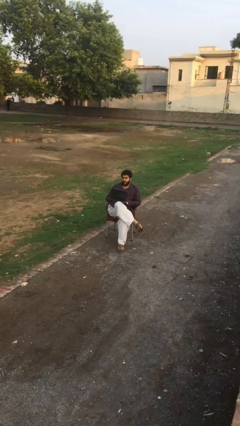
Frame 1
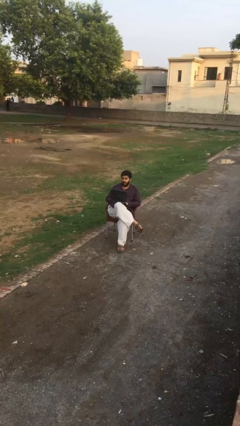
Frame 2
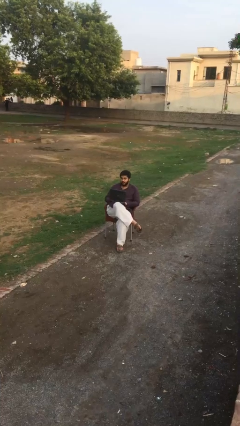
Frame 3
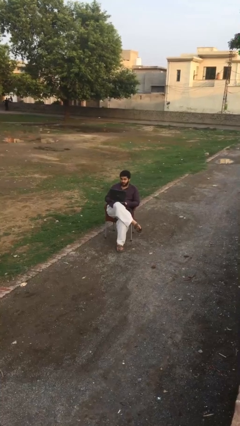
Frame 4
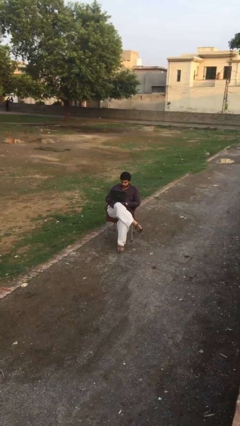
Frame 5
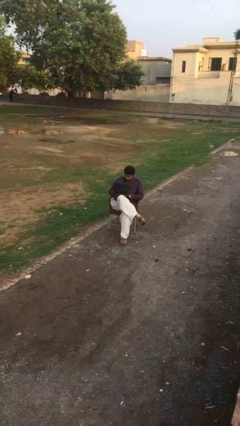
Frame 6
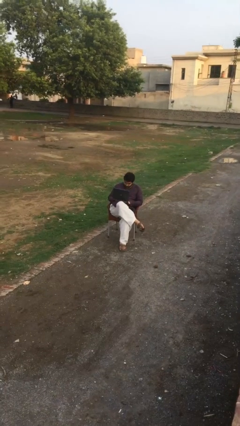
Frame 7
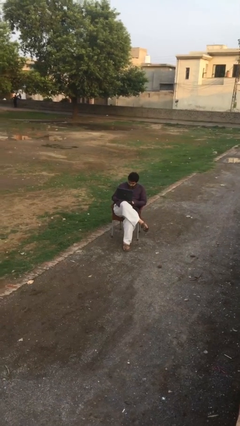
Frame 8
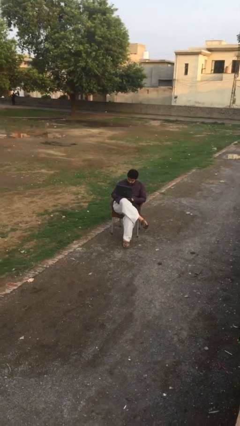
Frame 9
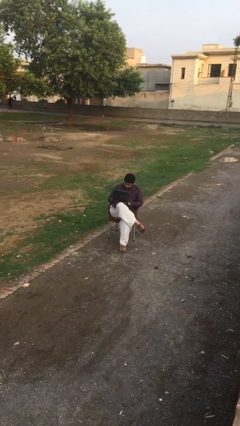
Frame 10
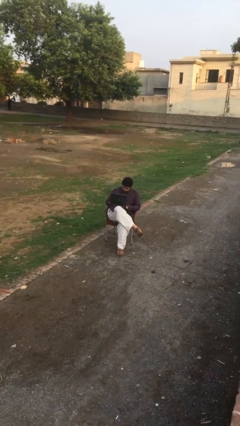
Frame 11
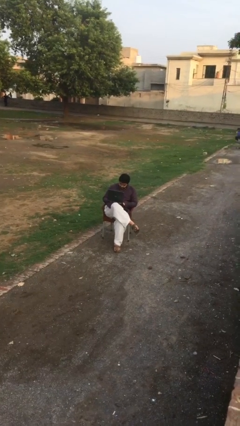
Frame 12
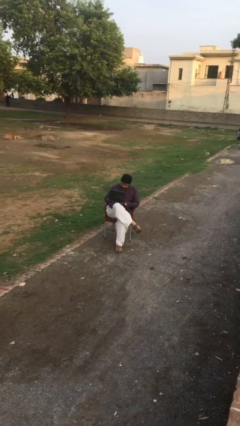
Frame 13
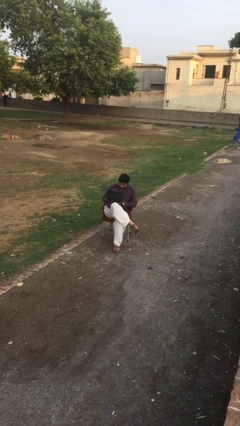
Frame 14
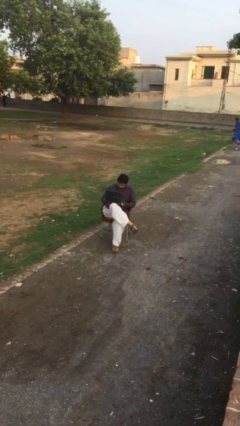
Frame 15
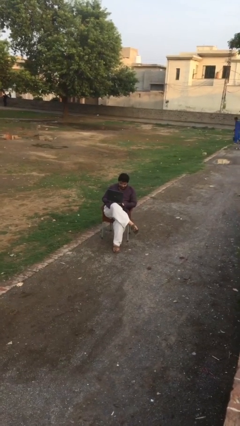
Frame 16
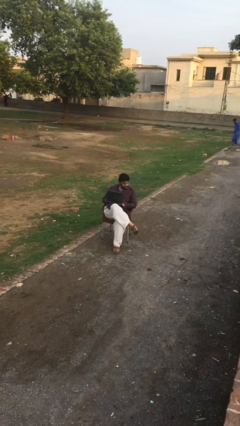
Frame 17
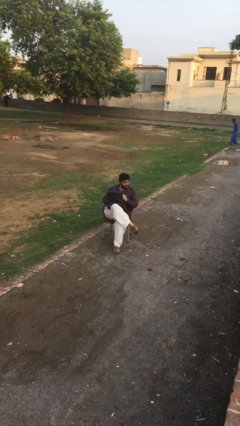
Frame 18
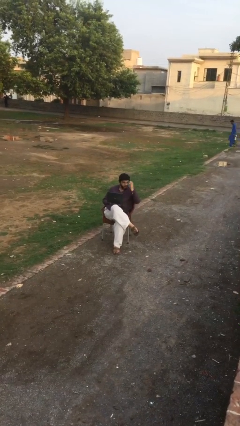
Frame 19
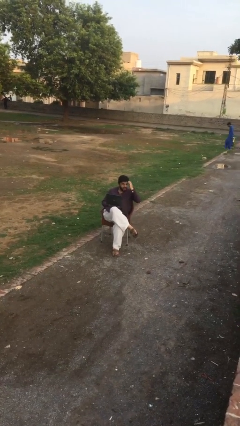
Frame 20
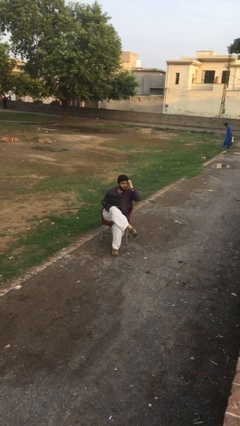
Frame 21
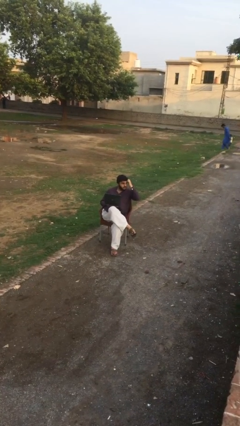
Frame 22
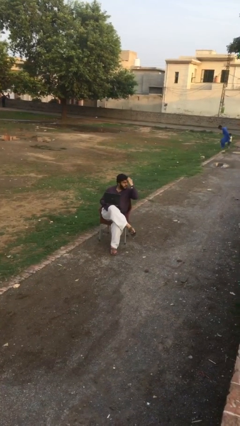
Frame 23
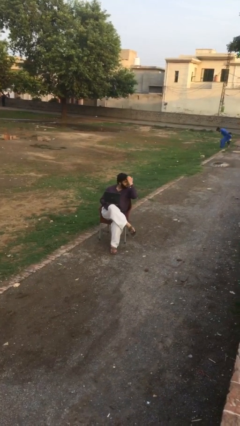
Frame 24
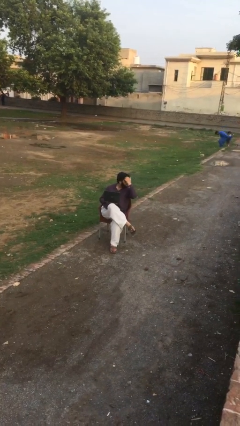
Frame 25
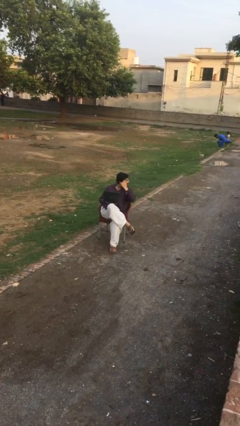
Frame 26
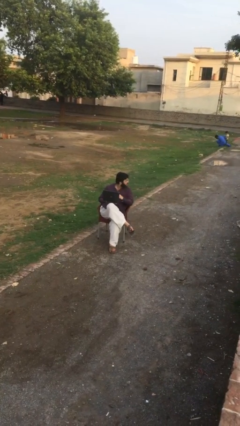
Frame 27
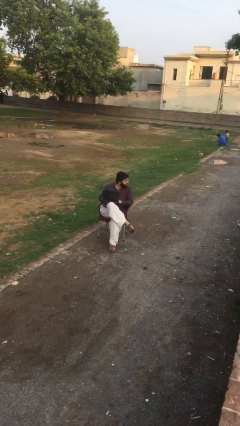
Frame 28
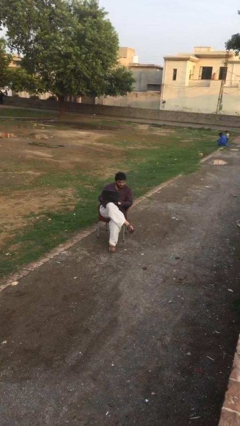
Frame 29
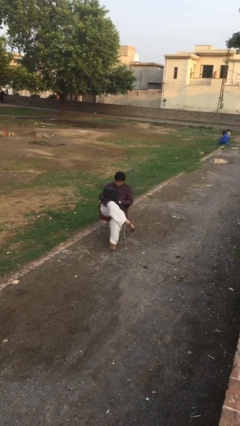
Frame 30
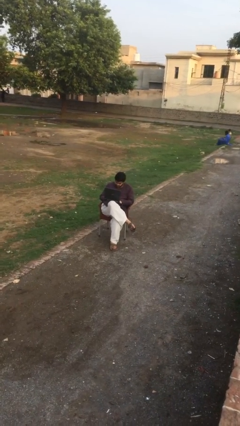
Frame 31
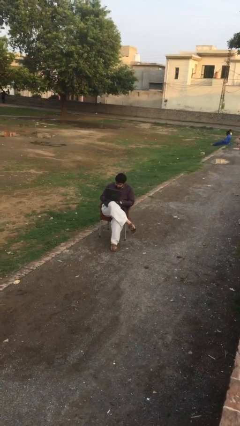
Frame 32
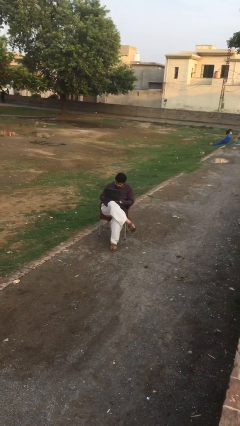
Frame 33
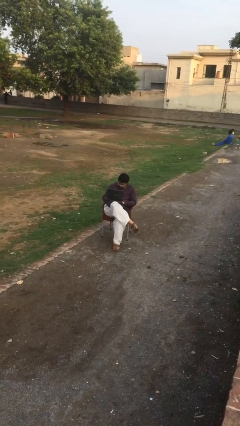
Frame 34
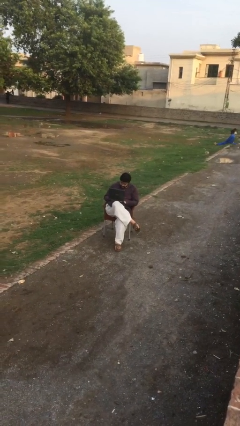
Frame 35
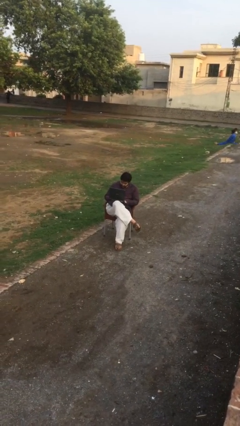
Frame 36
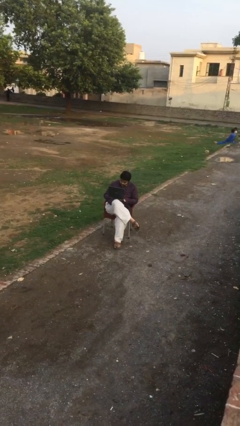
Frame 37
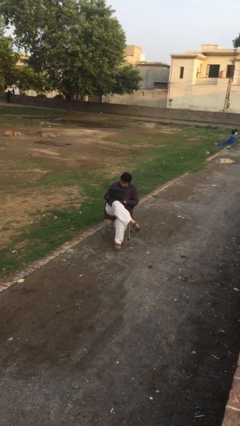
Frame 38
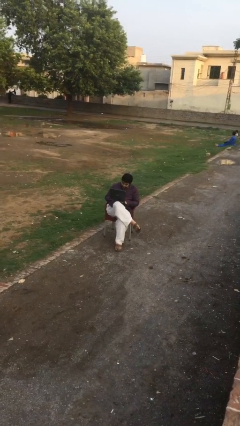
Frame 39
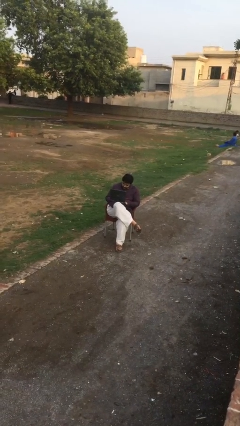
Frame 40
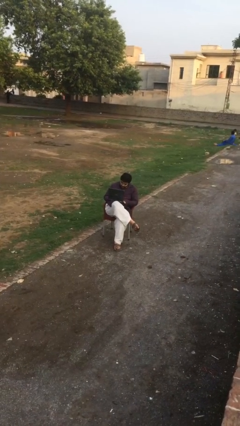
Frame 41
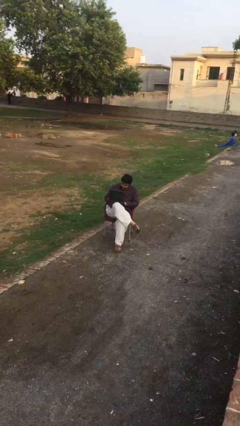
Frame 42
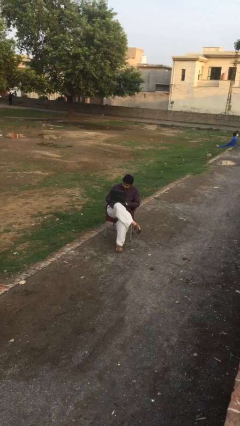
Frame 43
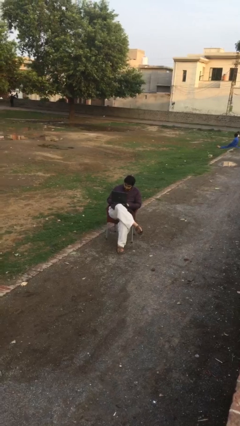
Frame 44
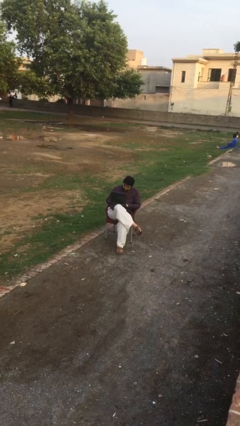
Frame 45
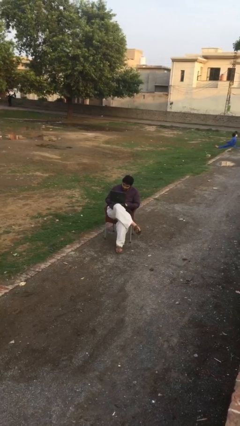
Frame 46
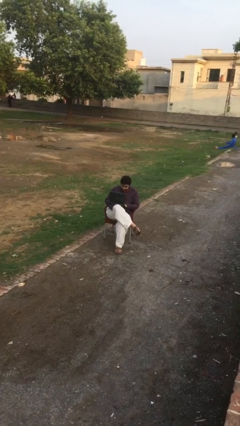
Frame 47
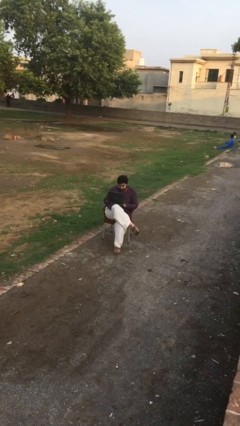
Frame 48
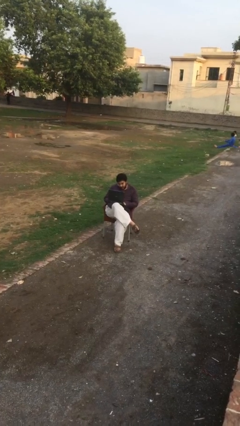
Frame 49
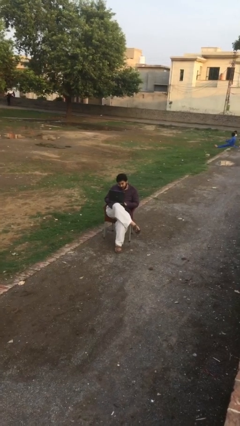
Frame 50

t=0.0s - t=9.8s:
person interacts with laptop

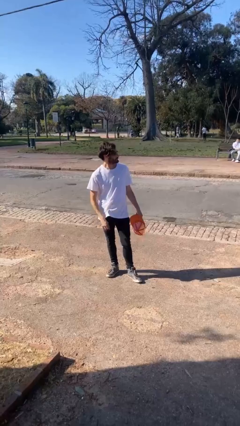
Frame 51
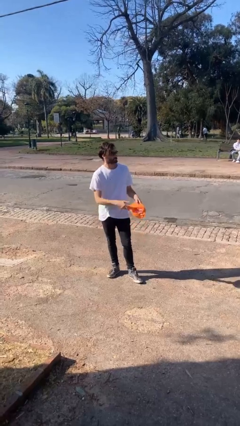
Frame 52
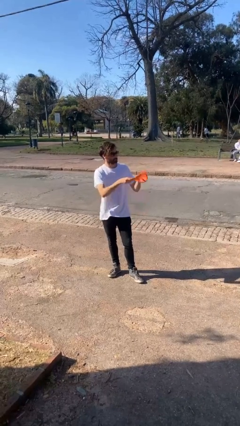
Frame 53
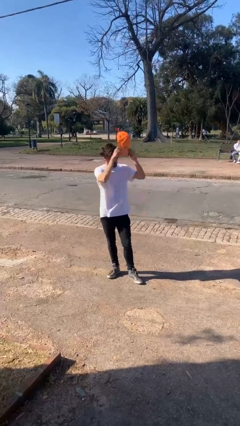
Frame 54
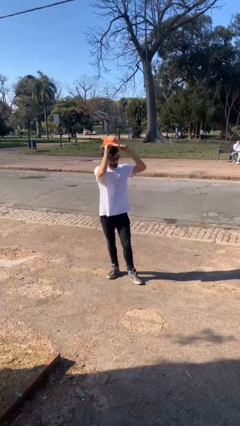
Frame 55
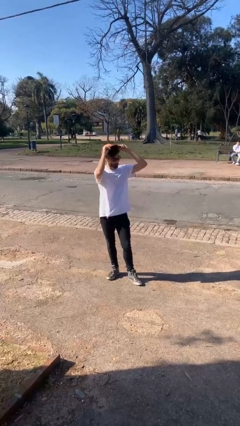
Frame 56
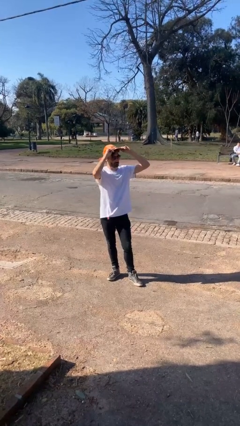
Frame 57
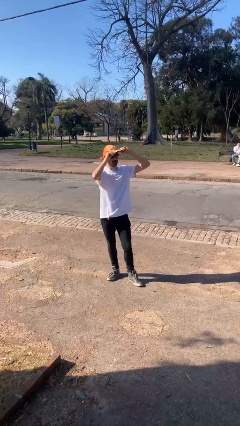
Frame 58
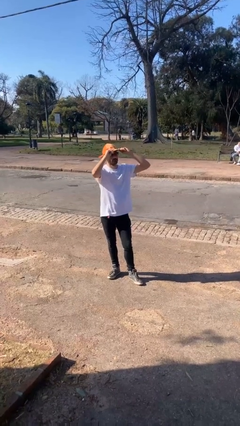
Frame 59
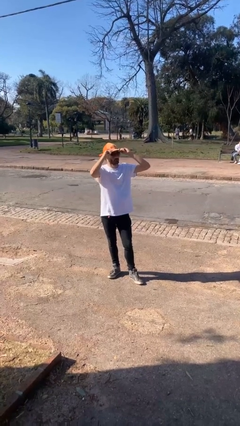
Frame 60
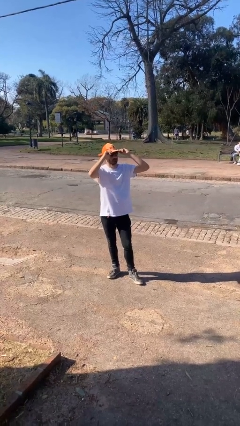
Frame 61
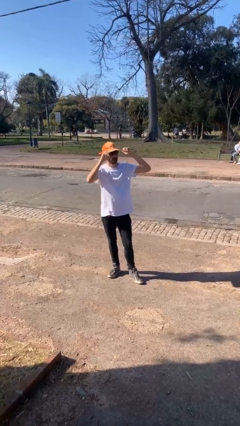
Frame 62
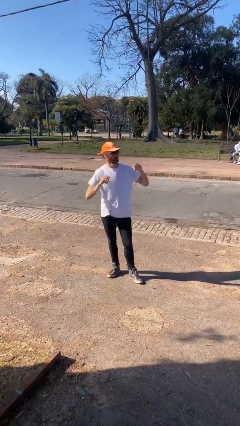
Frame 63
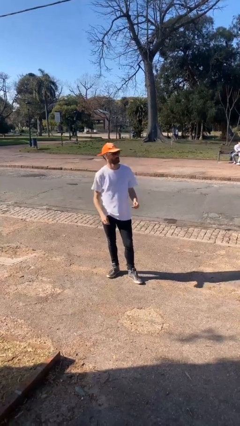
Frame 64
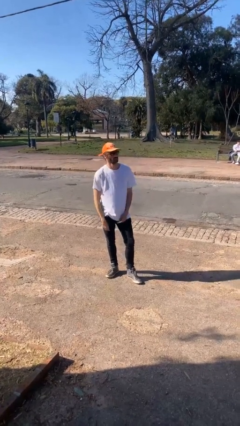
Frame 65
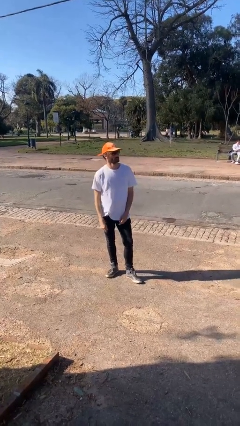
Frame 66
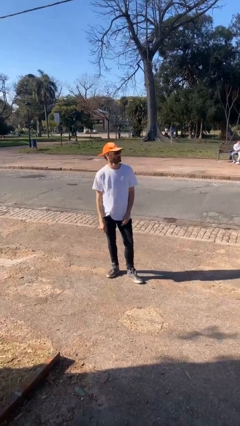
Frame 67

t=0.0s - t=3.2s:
person puts on hat

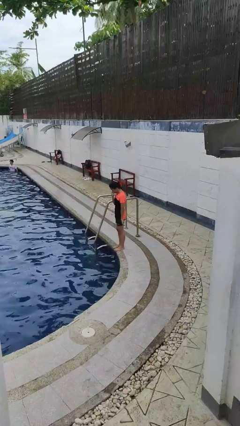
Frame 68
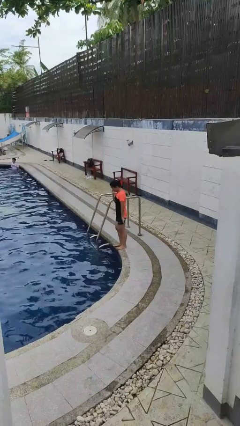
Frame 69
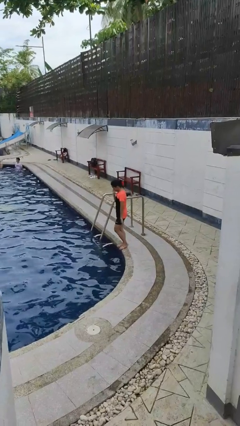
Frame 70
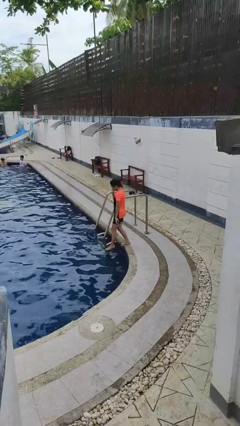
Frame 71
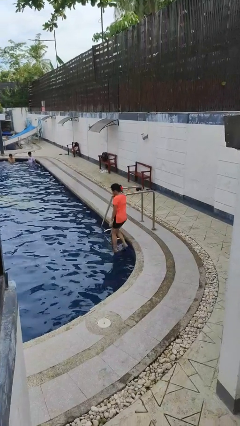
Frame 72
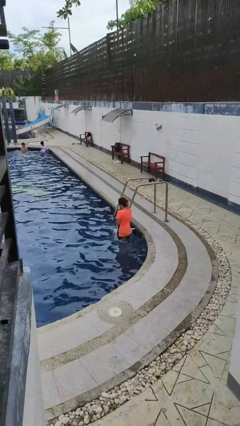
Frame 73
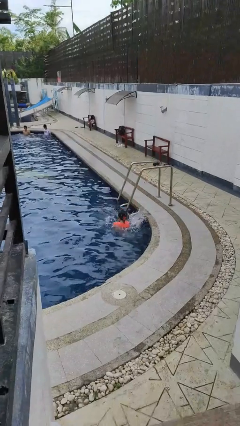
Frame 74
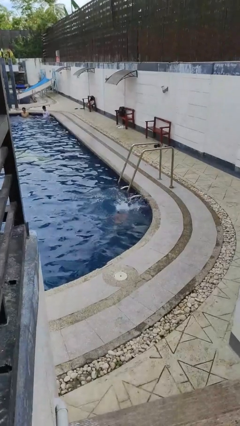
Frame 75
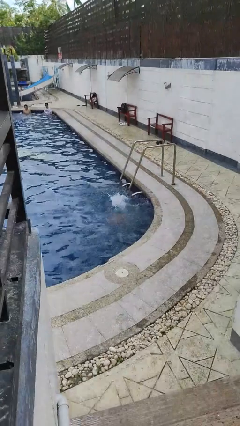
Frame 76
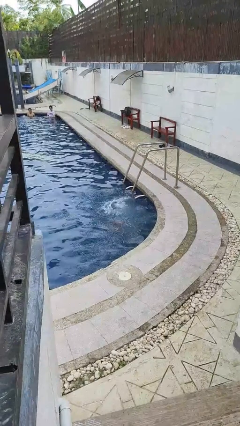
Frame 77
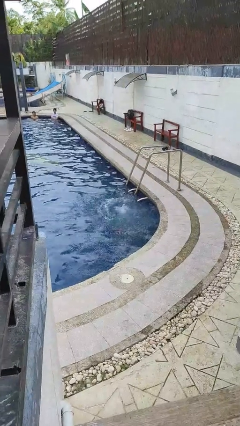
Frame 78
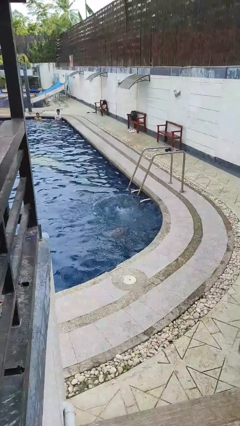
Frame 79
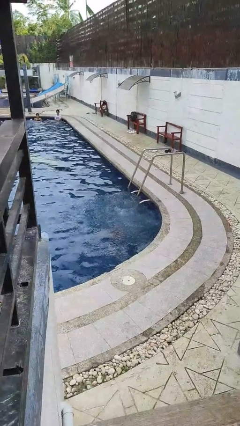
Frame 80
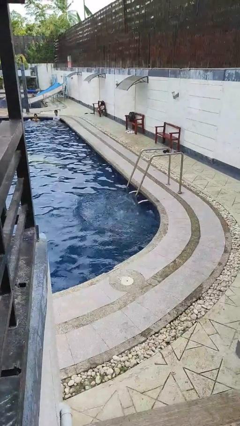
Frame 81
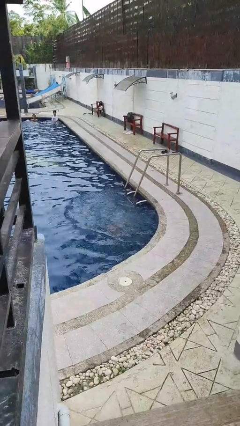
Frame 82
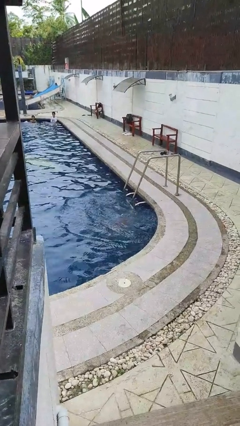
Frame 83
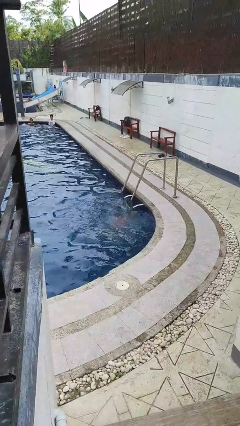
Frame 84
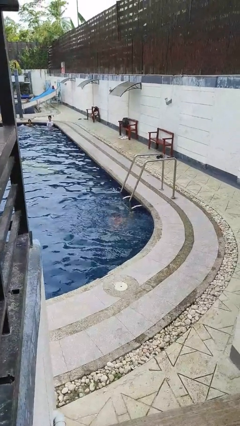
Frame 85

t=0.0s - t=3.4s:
person jumps into pool

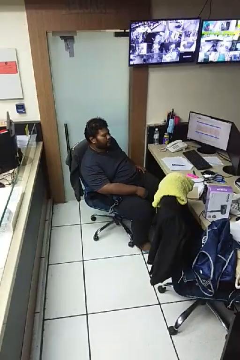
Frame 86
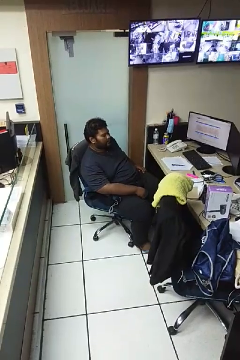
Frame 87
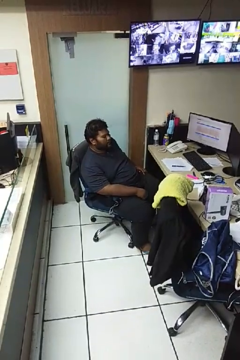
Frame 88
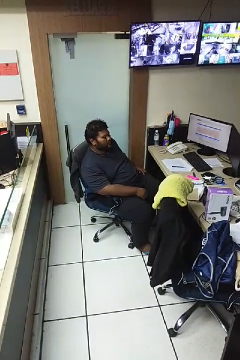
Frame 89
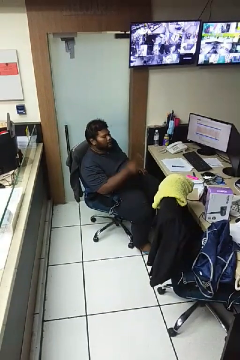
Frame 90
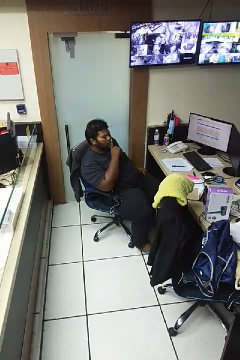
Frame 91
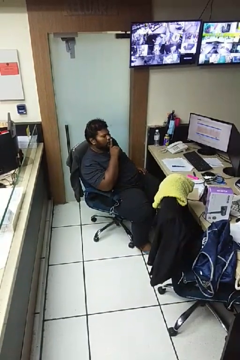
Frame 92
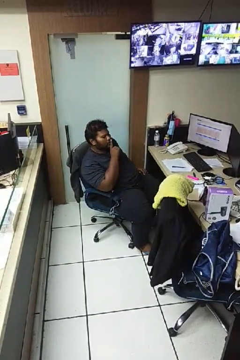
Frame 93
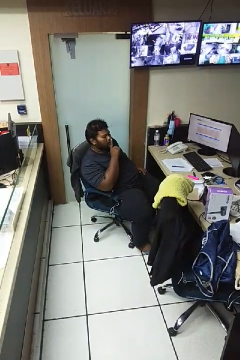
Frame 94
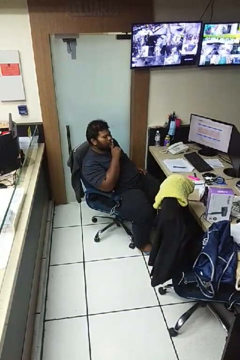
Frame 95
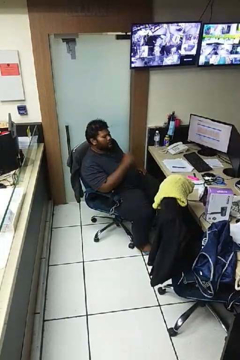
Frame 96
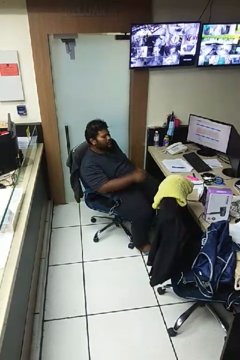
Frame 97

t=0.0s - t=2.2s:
person gestures be quiet
